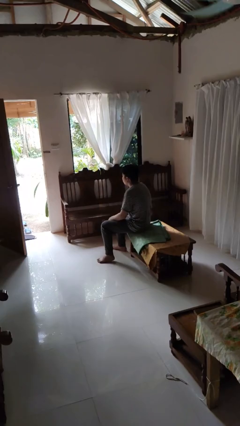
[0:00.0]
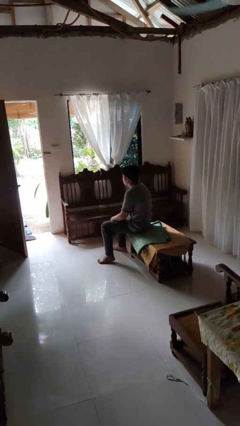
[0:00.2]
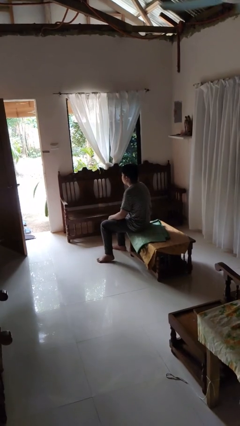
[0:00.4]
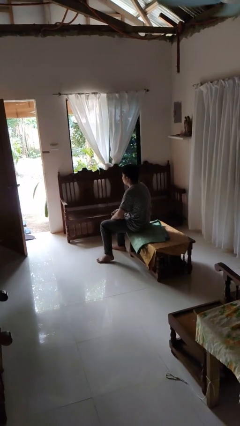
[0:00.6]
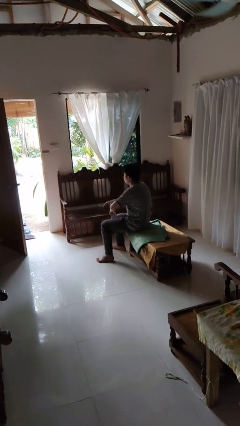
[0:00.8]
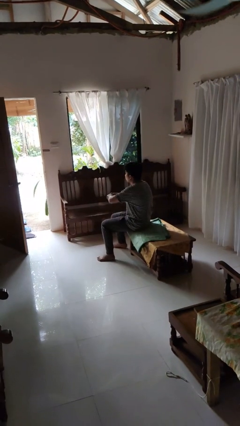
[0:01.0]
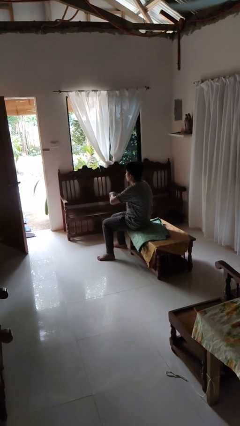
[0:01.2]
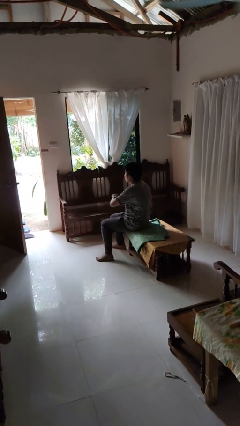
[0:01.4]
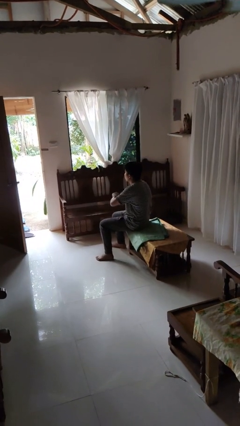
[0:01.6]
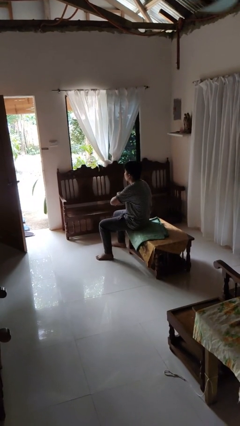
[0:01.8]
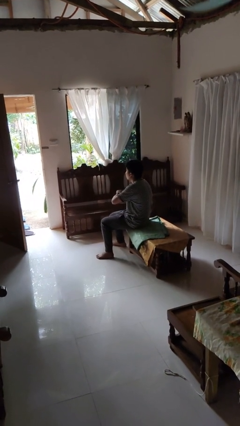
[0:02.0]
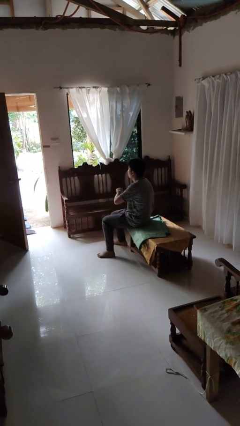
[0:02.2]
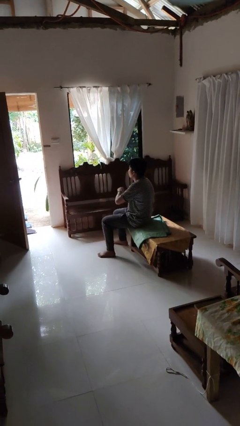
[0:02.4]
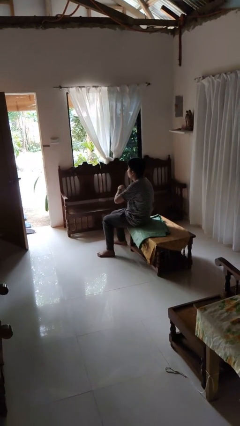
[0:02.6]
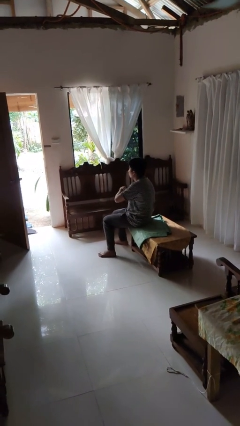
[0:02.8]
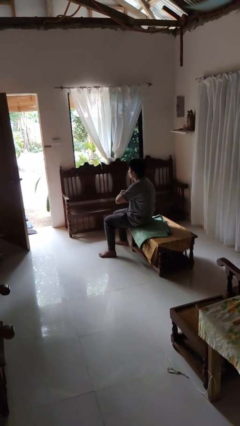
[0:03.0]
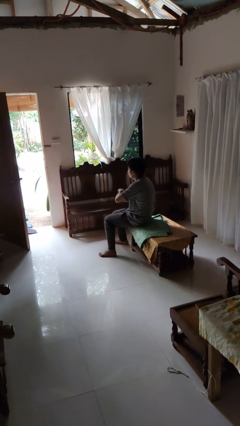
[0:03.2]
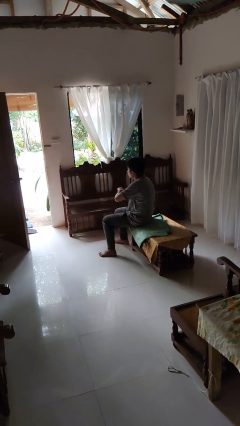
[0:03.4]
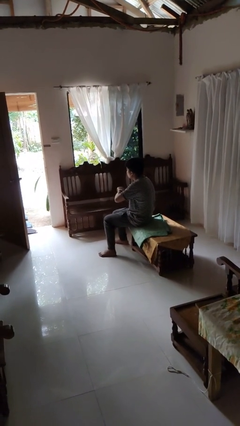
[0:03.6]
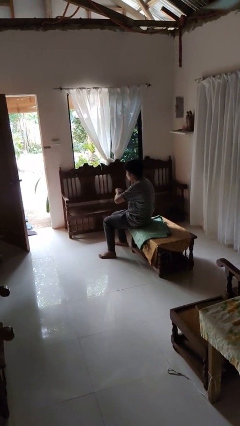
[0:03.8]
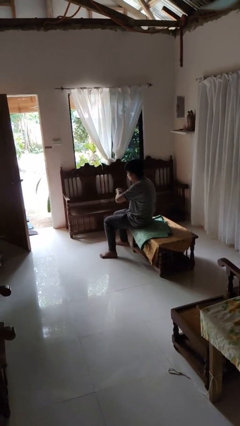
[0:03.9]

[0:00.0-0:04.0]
person puts on wristwatch

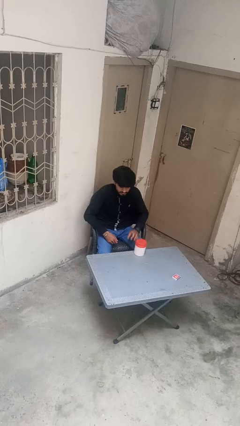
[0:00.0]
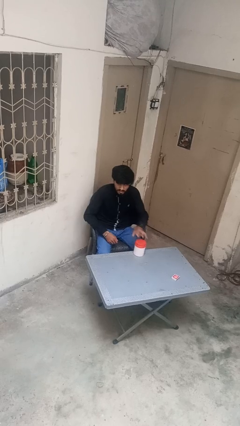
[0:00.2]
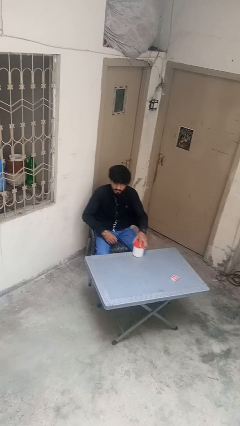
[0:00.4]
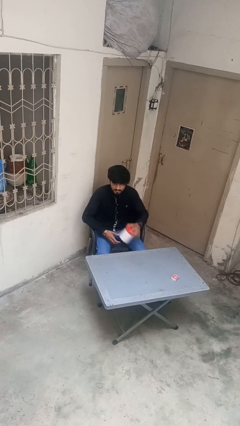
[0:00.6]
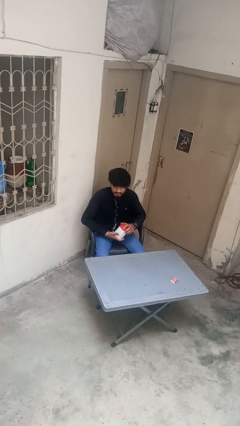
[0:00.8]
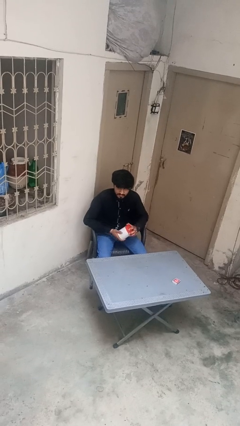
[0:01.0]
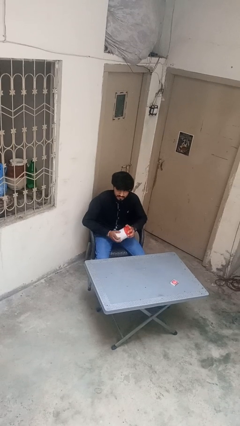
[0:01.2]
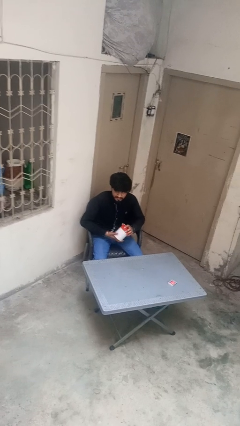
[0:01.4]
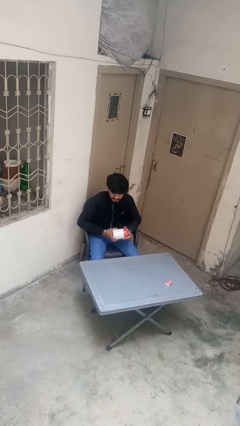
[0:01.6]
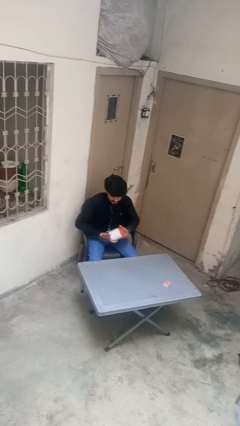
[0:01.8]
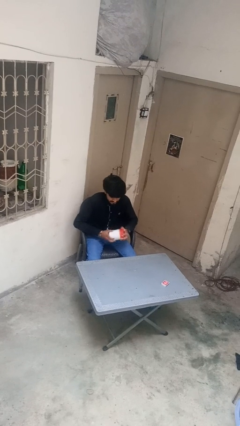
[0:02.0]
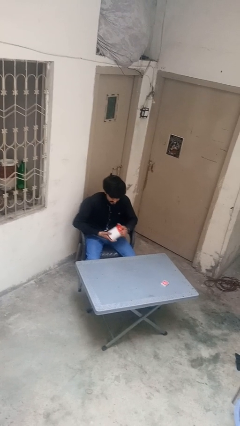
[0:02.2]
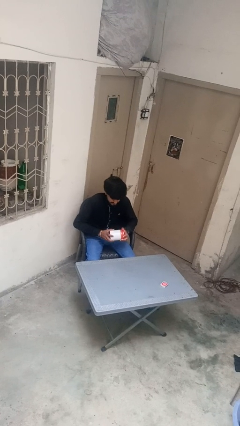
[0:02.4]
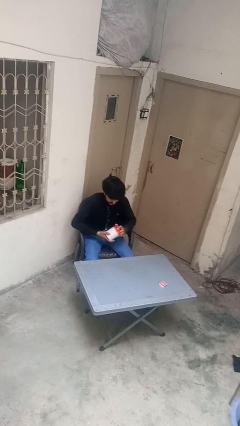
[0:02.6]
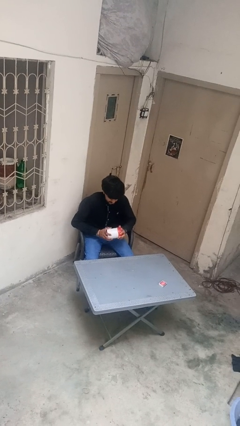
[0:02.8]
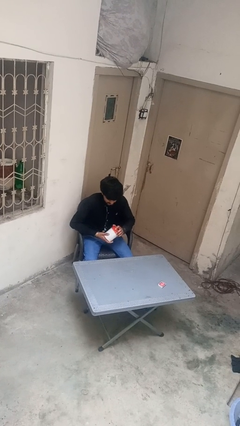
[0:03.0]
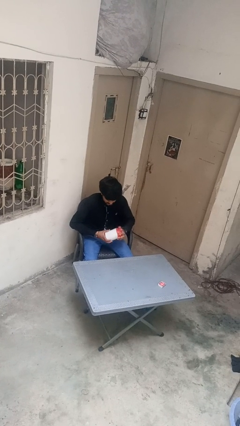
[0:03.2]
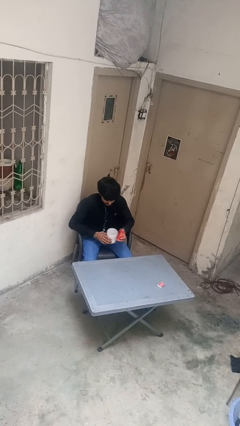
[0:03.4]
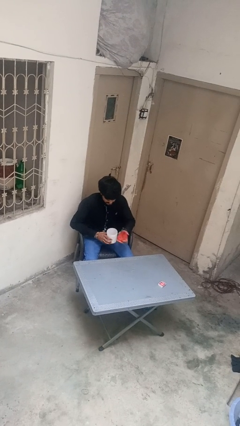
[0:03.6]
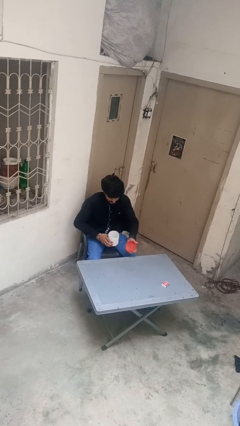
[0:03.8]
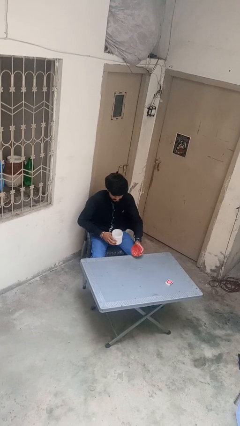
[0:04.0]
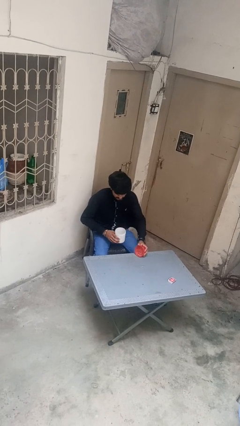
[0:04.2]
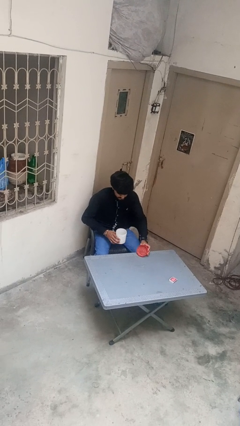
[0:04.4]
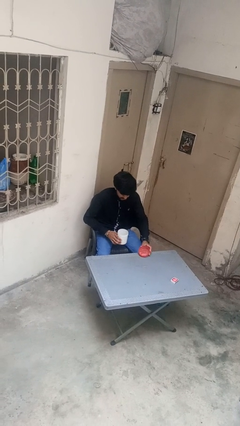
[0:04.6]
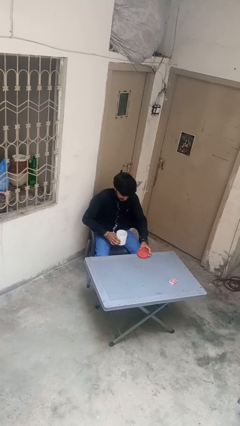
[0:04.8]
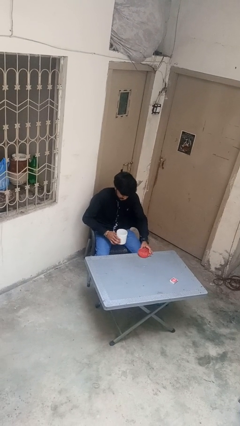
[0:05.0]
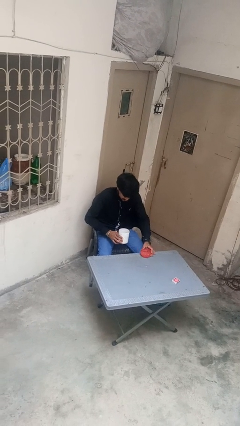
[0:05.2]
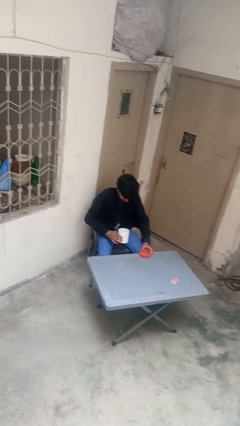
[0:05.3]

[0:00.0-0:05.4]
person opens jar

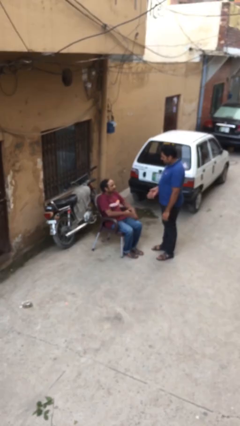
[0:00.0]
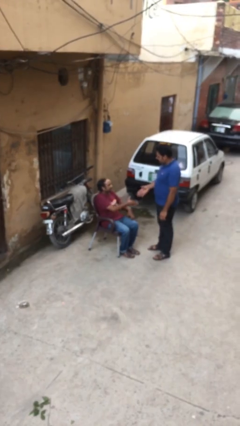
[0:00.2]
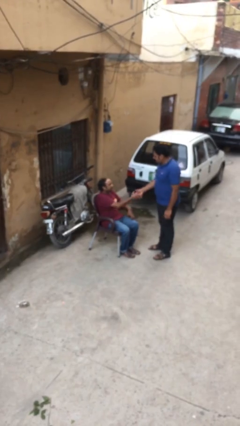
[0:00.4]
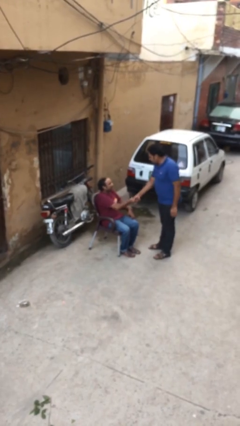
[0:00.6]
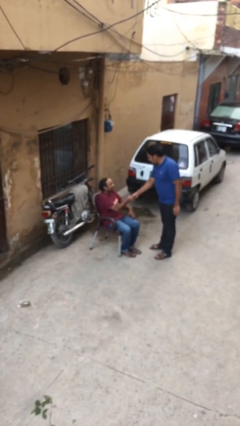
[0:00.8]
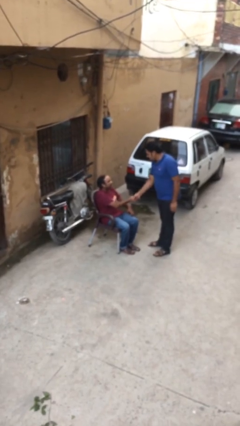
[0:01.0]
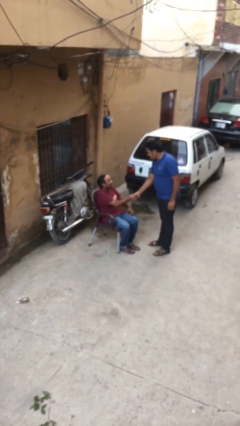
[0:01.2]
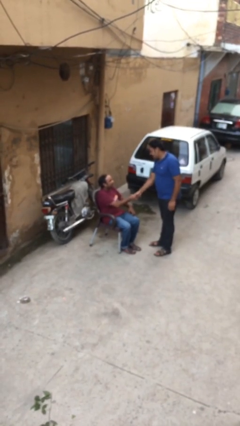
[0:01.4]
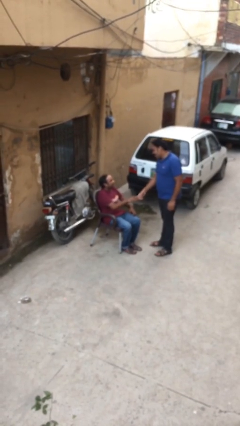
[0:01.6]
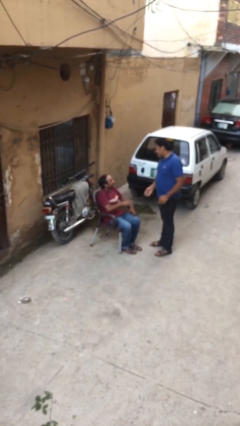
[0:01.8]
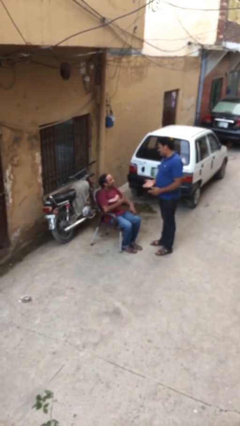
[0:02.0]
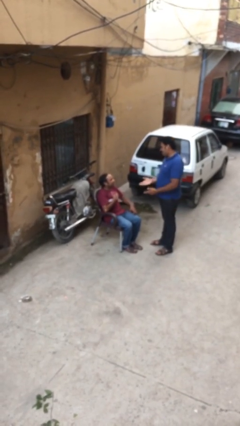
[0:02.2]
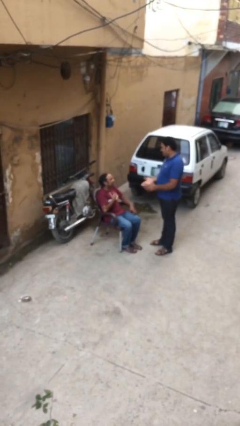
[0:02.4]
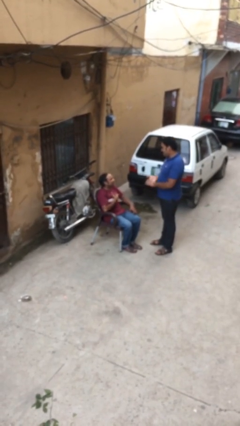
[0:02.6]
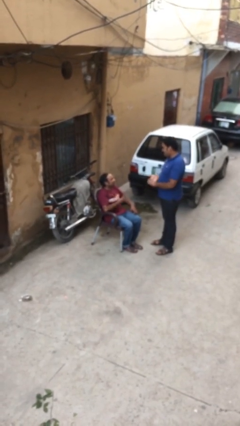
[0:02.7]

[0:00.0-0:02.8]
person shakes hand

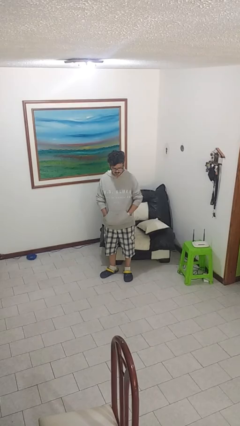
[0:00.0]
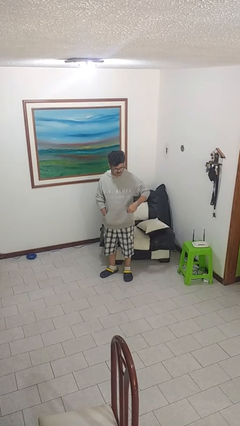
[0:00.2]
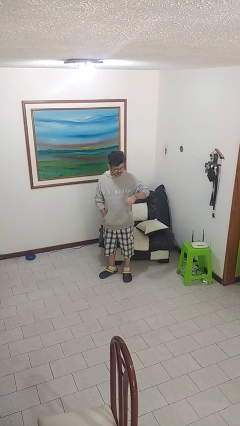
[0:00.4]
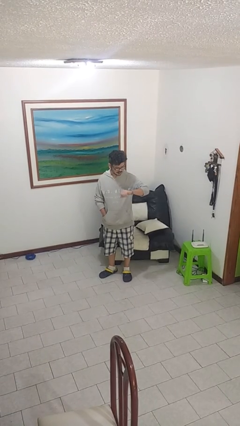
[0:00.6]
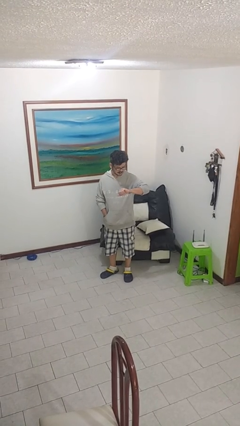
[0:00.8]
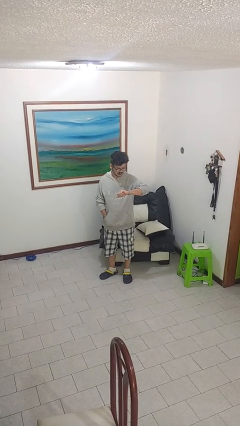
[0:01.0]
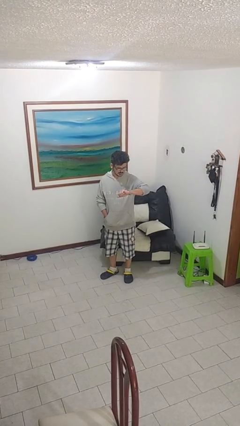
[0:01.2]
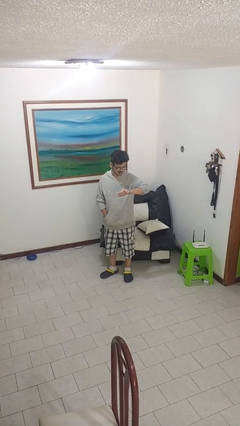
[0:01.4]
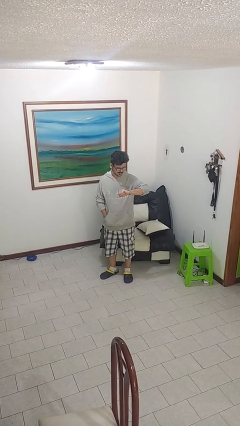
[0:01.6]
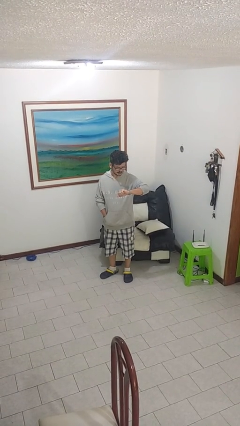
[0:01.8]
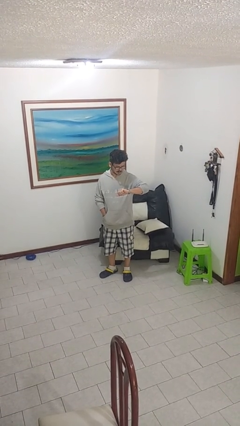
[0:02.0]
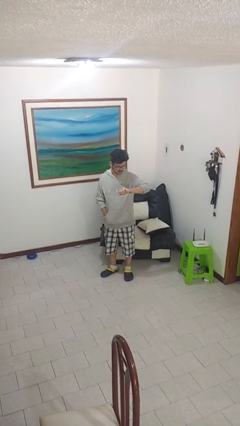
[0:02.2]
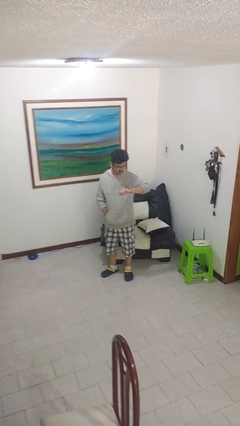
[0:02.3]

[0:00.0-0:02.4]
person looks at wristwatch

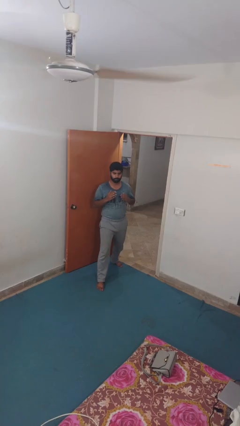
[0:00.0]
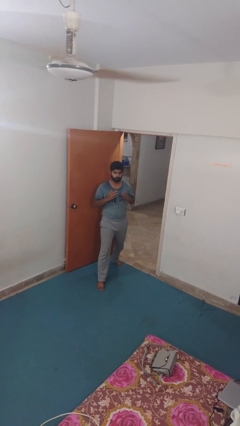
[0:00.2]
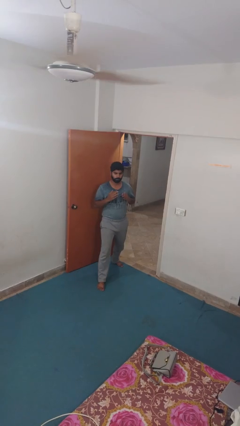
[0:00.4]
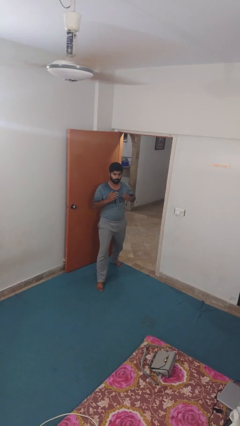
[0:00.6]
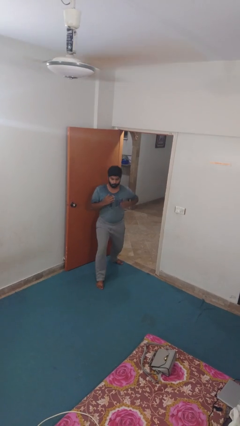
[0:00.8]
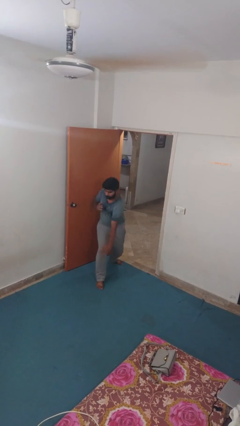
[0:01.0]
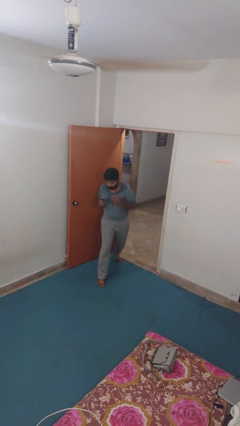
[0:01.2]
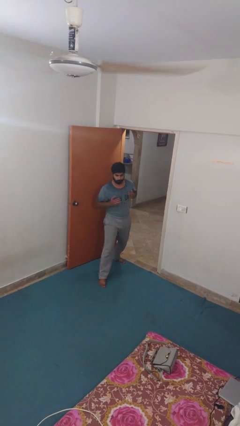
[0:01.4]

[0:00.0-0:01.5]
person karate chop

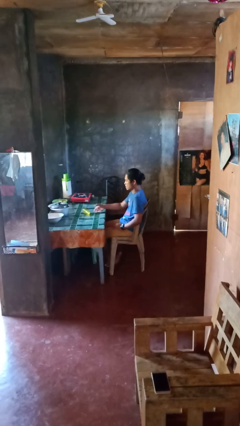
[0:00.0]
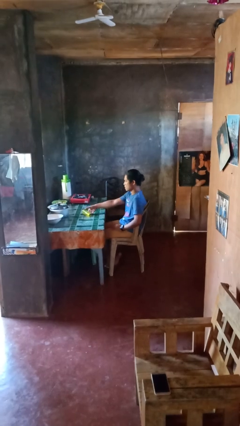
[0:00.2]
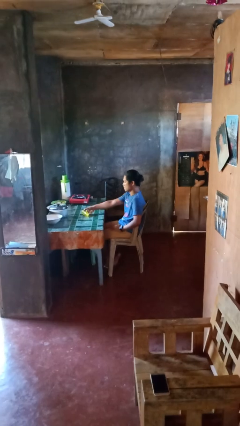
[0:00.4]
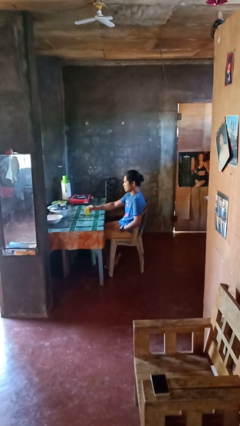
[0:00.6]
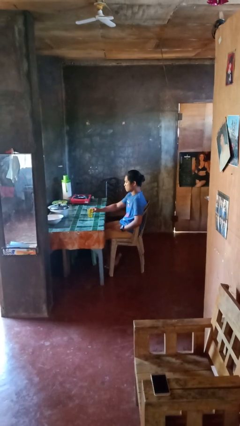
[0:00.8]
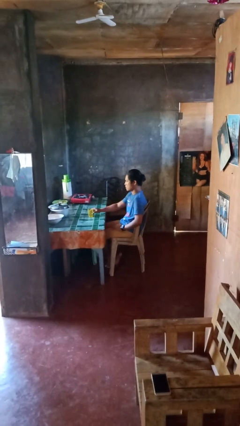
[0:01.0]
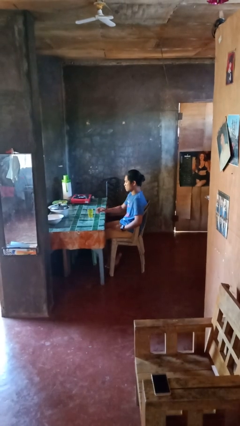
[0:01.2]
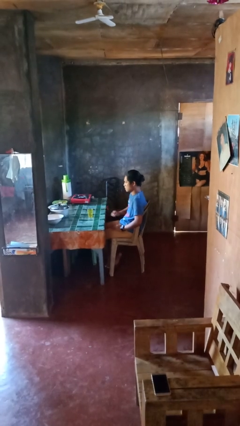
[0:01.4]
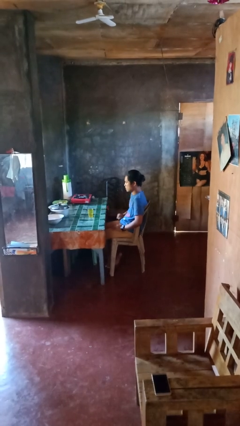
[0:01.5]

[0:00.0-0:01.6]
person sets upright glass
